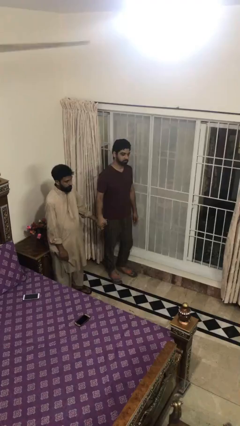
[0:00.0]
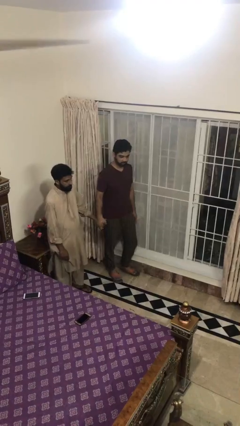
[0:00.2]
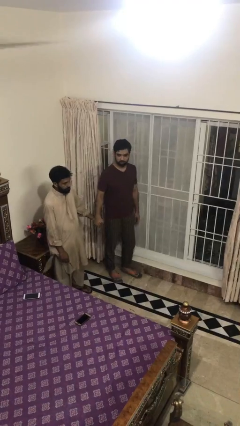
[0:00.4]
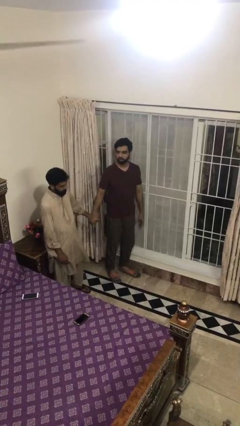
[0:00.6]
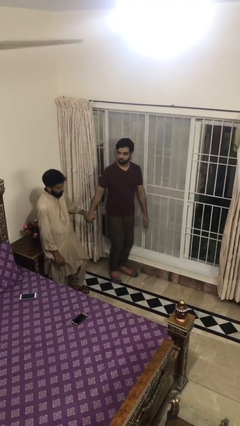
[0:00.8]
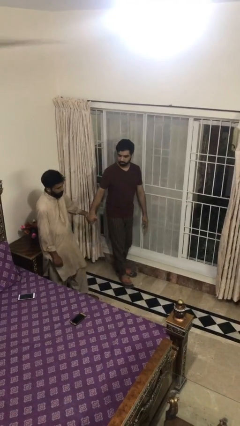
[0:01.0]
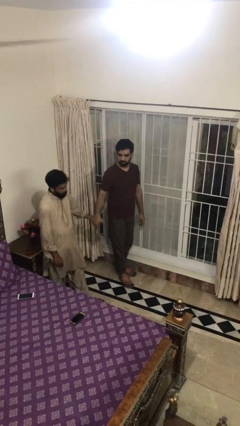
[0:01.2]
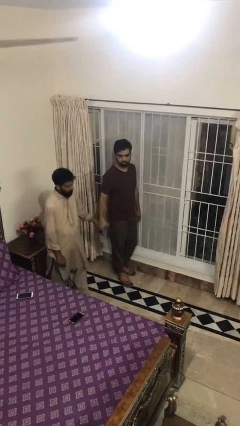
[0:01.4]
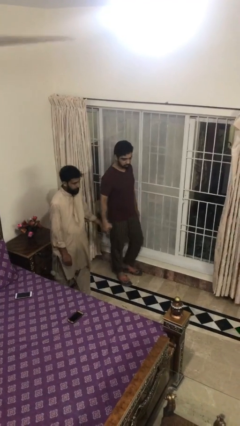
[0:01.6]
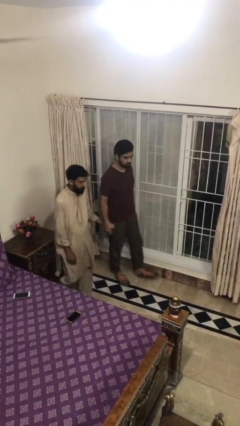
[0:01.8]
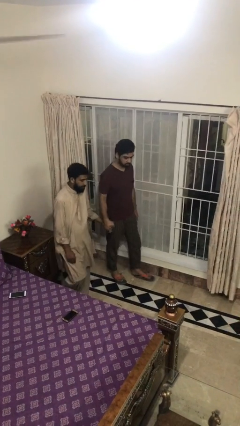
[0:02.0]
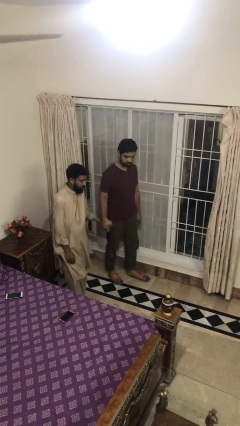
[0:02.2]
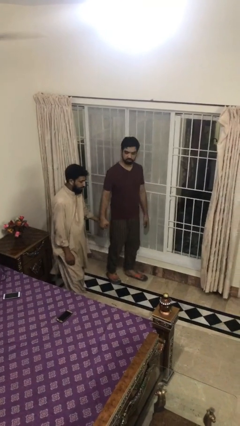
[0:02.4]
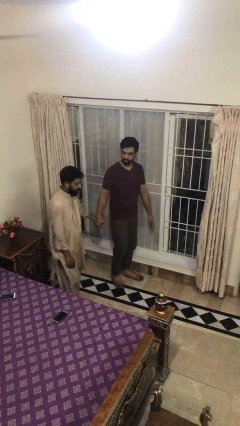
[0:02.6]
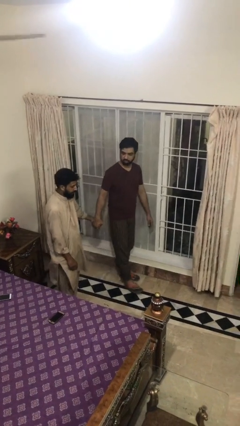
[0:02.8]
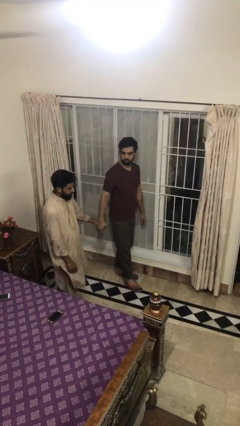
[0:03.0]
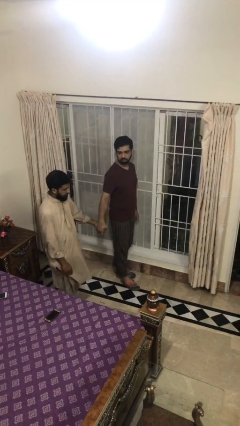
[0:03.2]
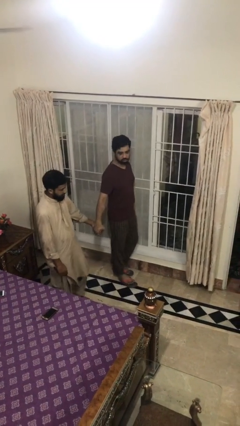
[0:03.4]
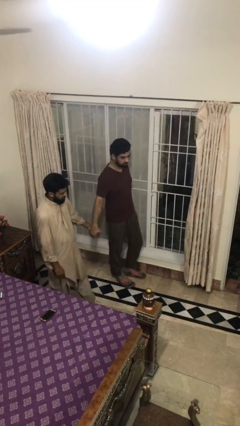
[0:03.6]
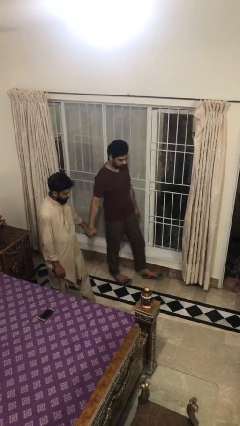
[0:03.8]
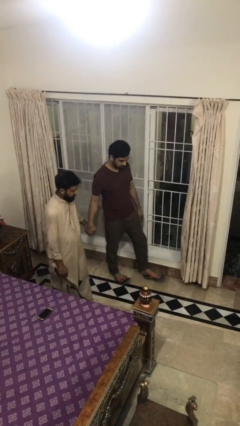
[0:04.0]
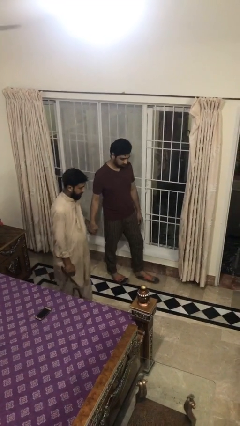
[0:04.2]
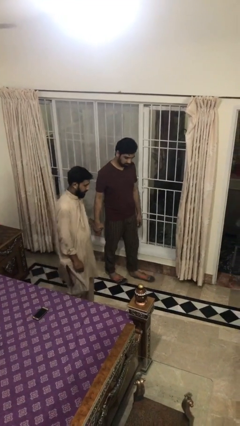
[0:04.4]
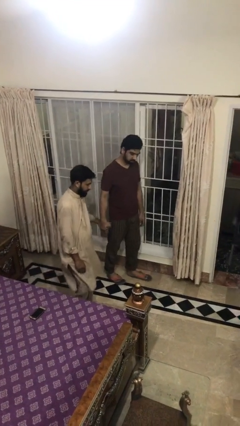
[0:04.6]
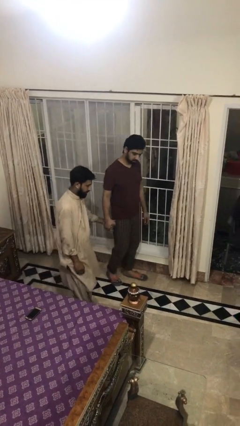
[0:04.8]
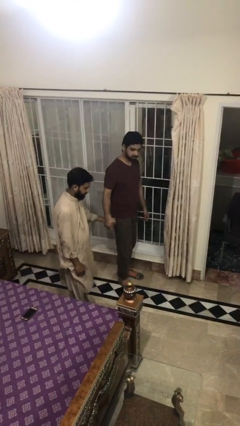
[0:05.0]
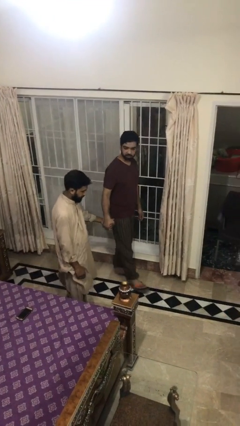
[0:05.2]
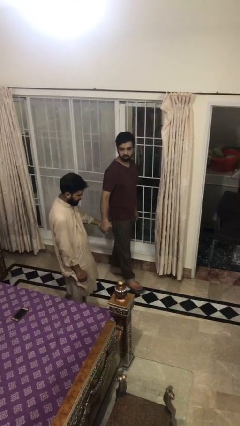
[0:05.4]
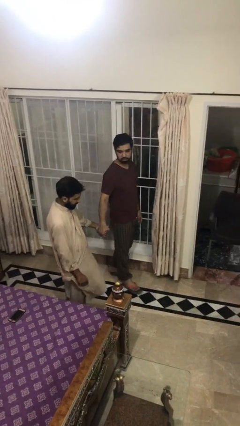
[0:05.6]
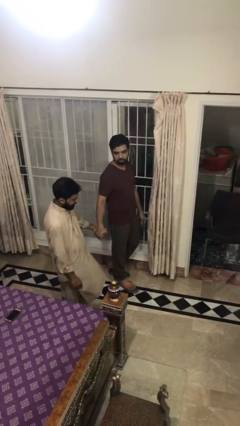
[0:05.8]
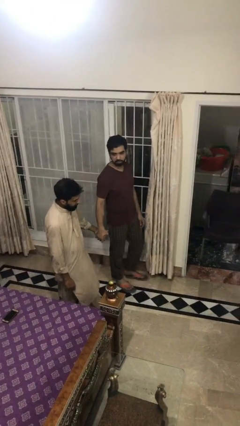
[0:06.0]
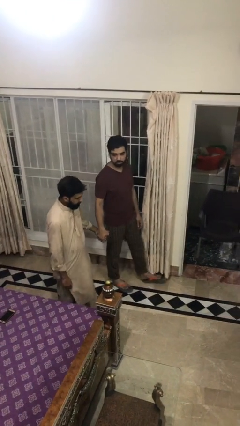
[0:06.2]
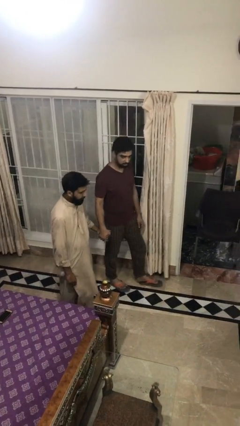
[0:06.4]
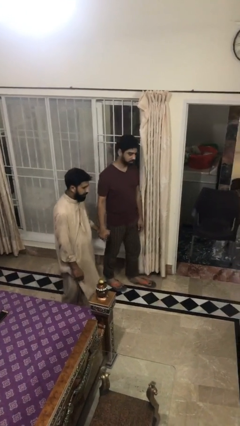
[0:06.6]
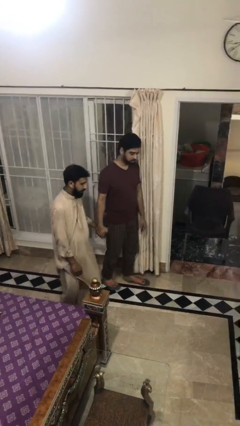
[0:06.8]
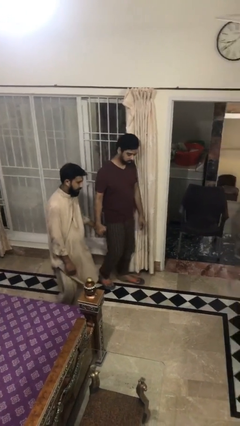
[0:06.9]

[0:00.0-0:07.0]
person holds hand

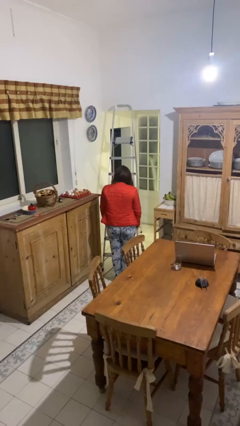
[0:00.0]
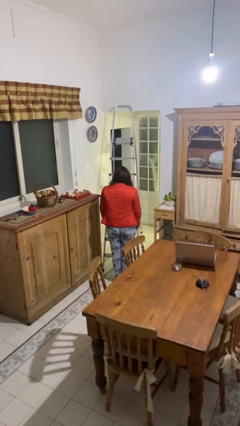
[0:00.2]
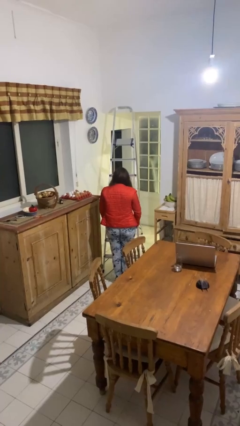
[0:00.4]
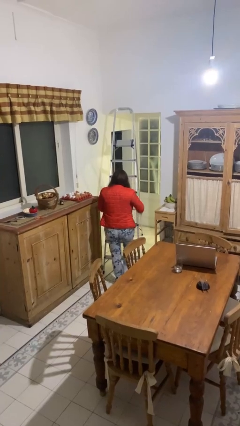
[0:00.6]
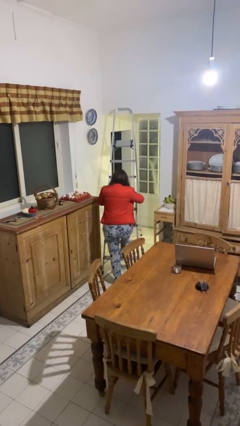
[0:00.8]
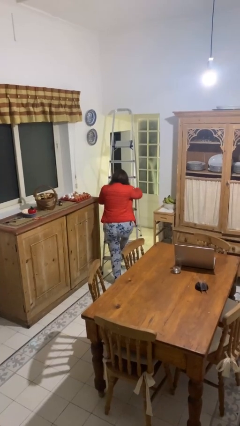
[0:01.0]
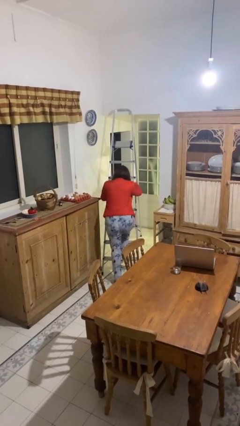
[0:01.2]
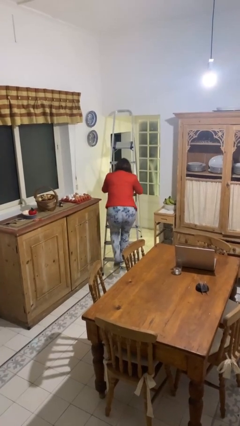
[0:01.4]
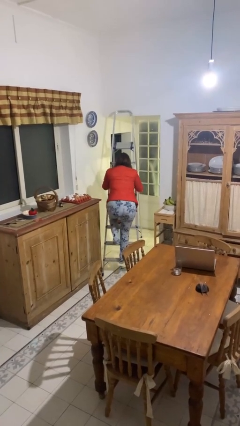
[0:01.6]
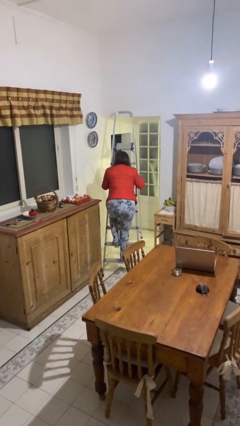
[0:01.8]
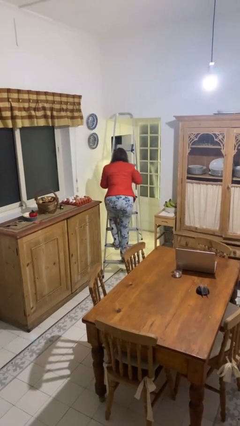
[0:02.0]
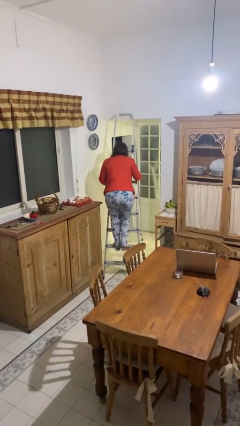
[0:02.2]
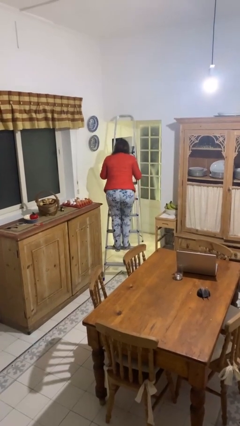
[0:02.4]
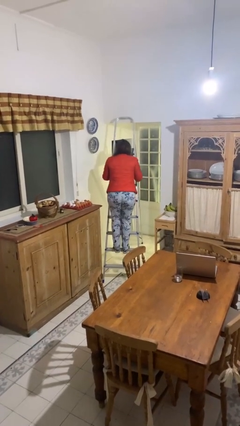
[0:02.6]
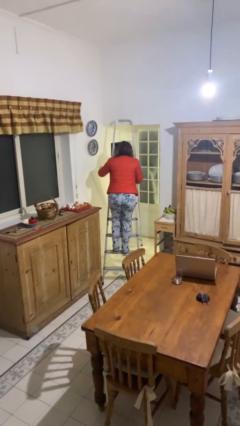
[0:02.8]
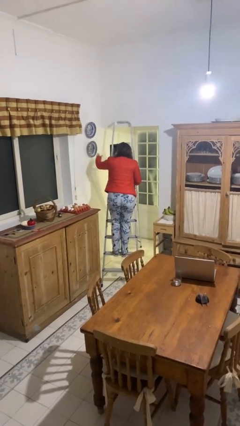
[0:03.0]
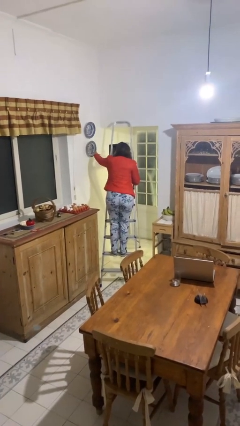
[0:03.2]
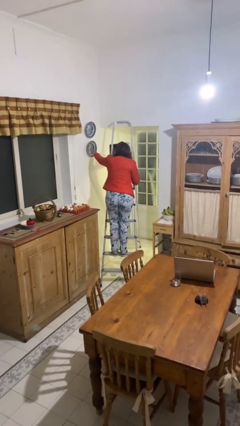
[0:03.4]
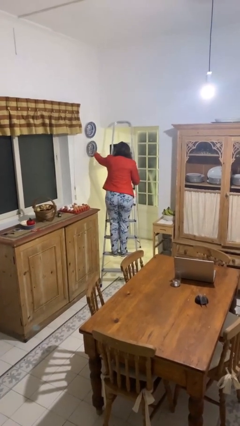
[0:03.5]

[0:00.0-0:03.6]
person climbs up ladder

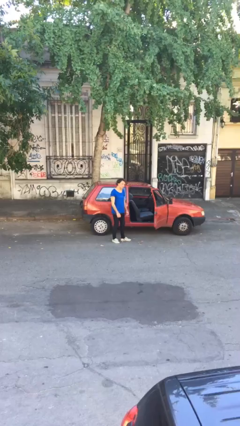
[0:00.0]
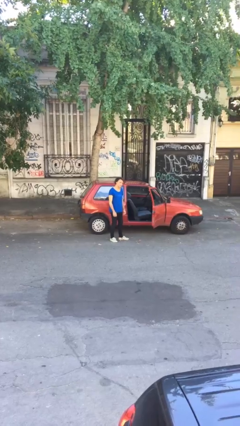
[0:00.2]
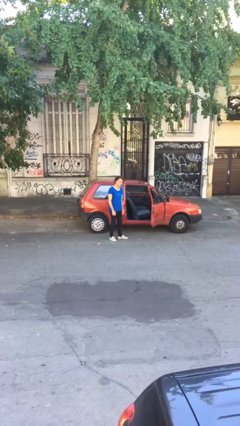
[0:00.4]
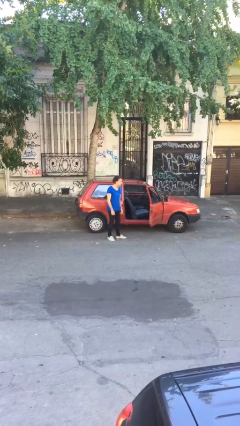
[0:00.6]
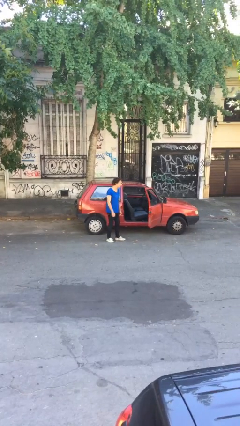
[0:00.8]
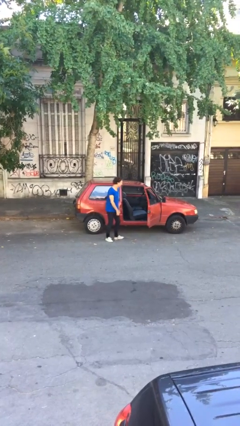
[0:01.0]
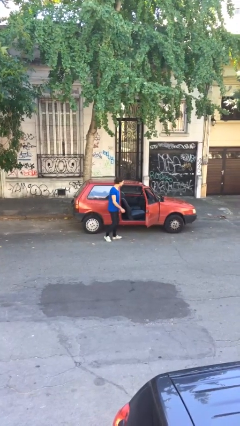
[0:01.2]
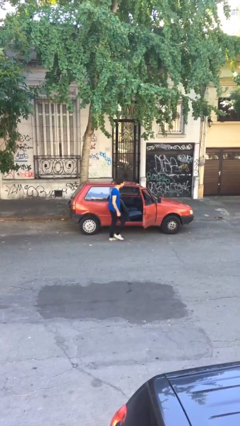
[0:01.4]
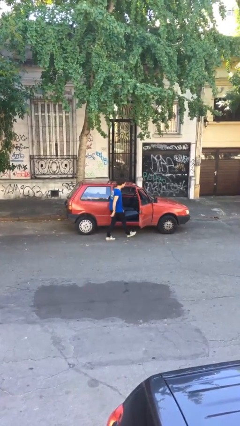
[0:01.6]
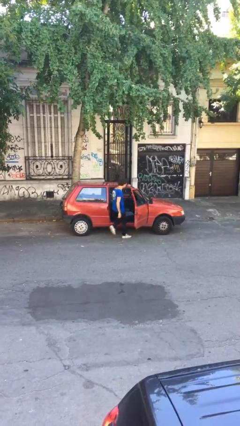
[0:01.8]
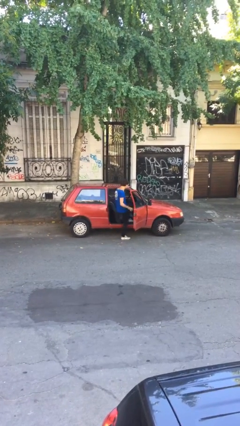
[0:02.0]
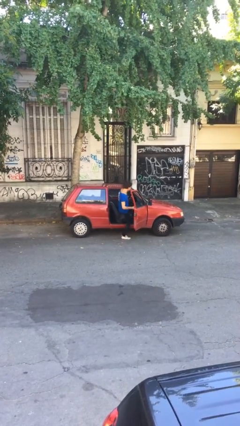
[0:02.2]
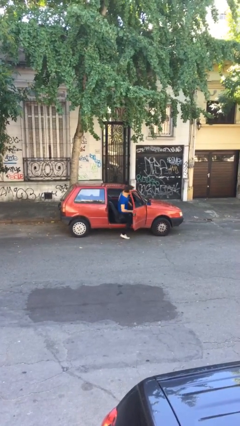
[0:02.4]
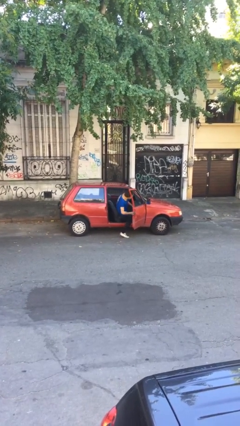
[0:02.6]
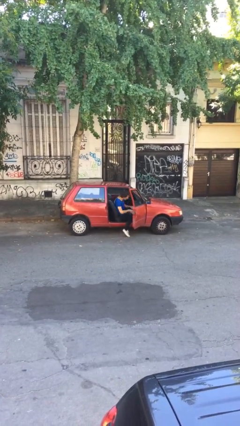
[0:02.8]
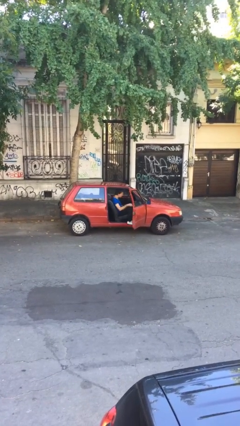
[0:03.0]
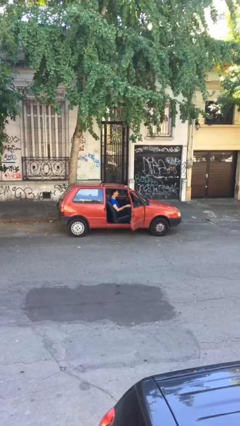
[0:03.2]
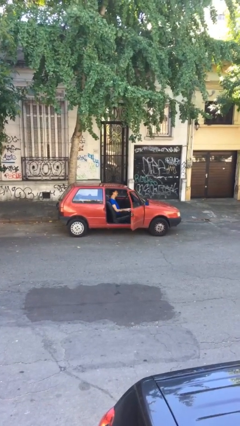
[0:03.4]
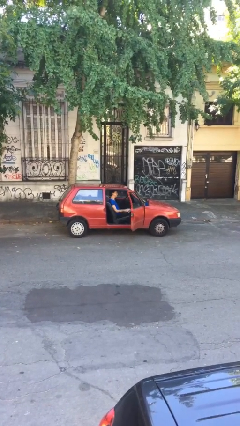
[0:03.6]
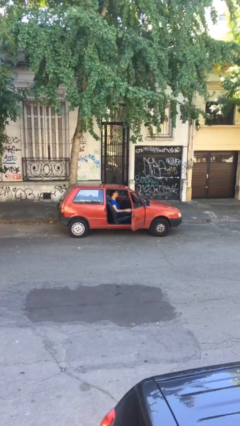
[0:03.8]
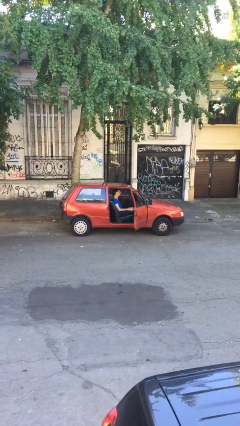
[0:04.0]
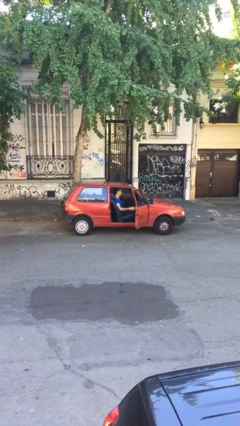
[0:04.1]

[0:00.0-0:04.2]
person enters car

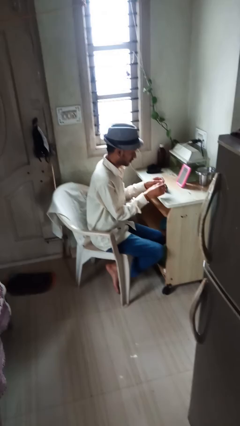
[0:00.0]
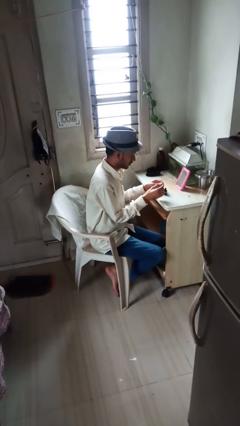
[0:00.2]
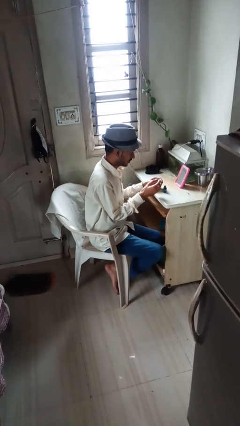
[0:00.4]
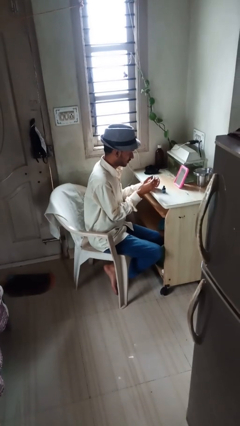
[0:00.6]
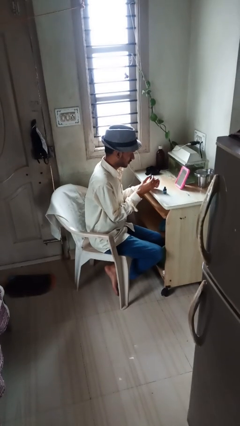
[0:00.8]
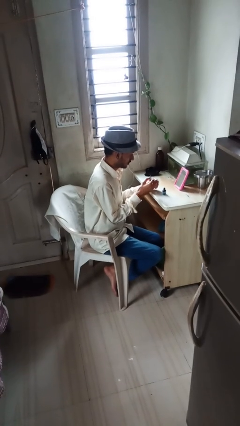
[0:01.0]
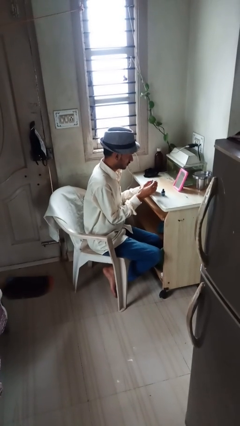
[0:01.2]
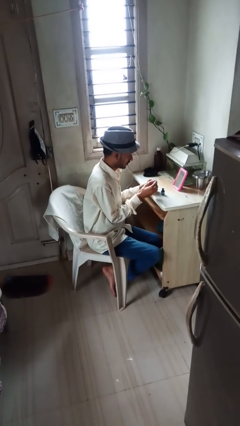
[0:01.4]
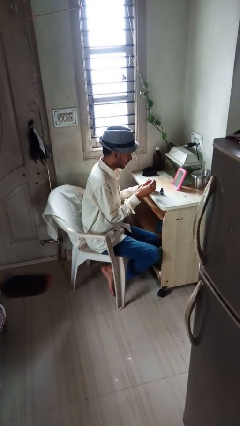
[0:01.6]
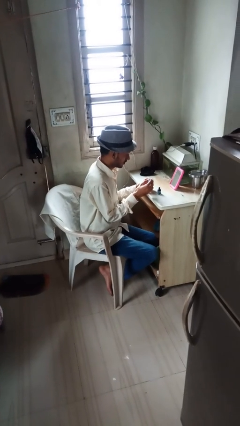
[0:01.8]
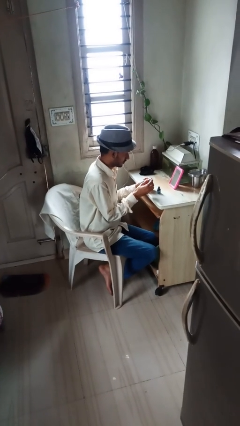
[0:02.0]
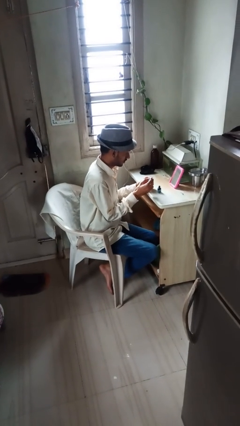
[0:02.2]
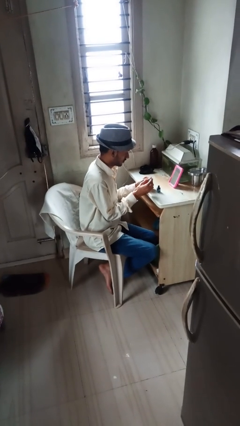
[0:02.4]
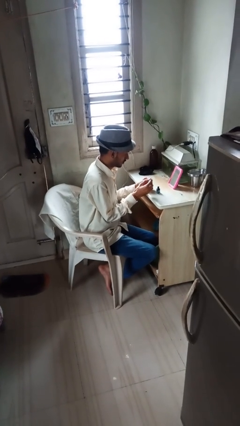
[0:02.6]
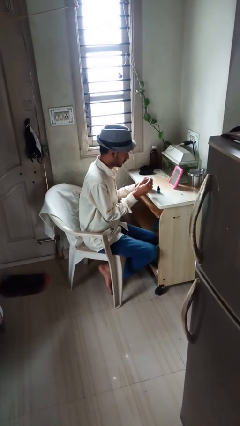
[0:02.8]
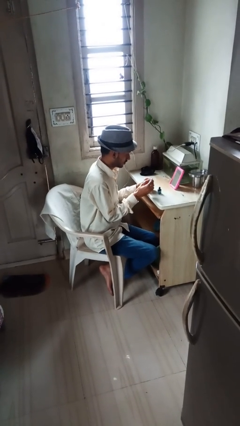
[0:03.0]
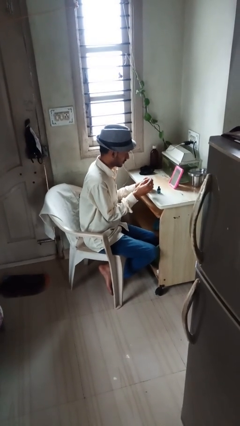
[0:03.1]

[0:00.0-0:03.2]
person paints fingernails
